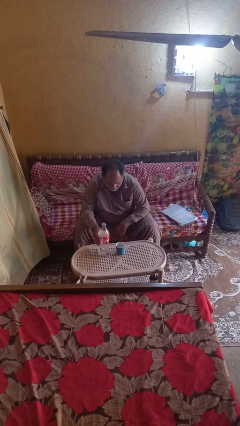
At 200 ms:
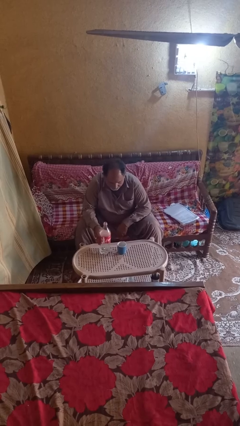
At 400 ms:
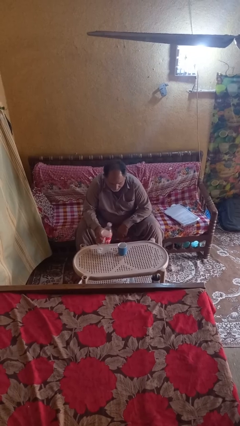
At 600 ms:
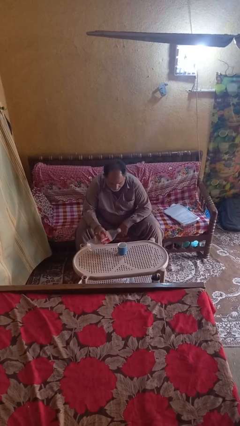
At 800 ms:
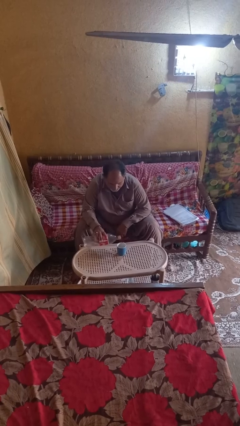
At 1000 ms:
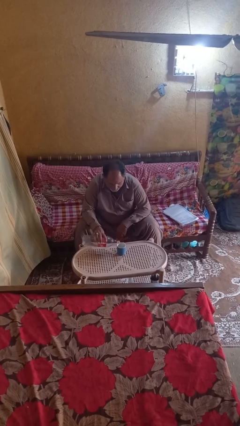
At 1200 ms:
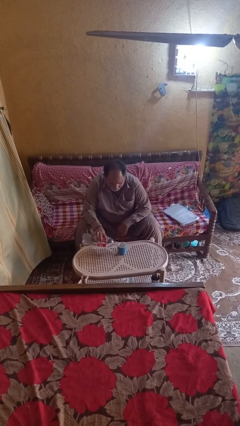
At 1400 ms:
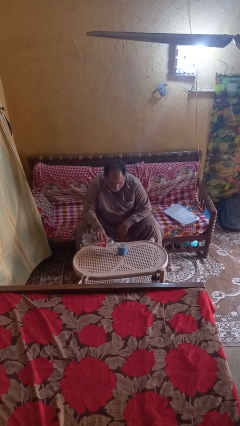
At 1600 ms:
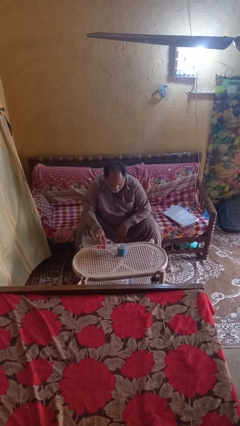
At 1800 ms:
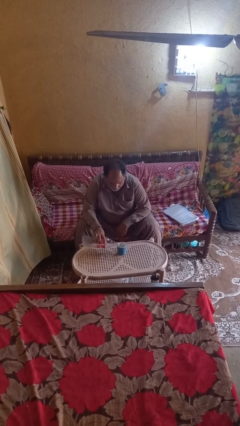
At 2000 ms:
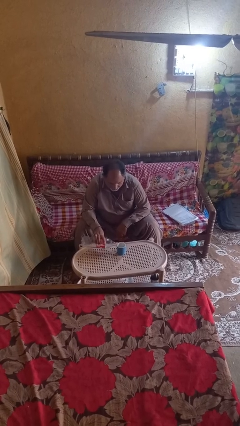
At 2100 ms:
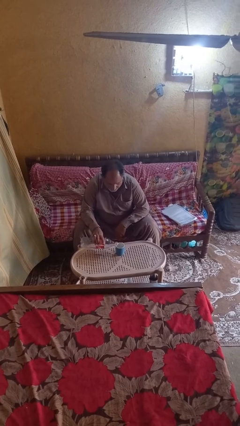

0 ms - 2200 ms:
person pours liquid into cup

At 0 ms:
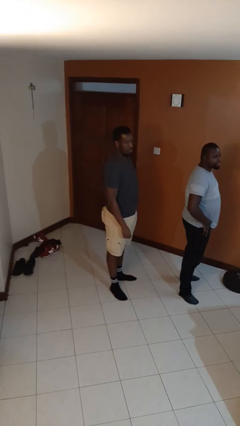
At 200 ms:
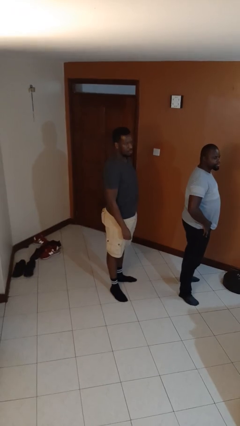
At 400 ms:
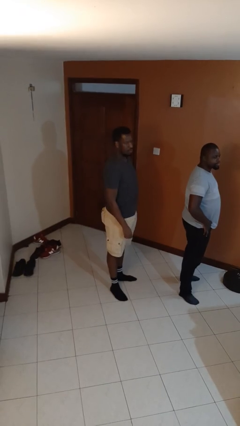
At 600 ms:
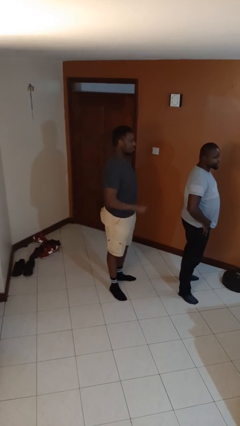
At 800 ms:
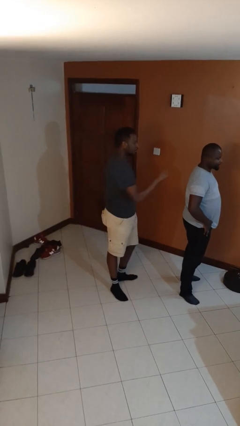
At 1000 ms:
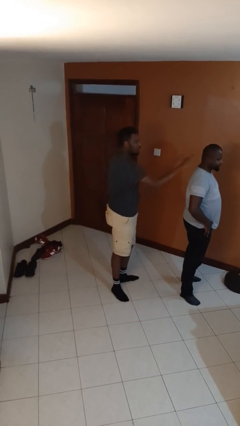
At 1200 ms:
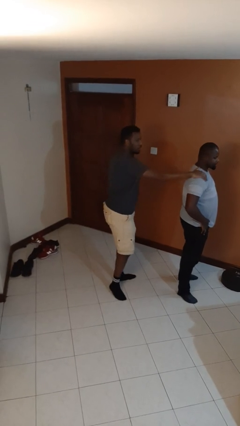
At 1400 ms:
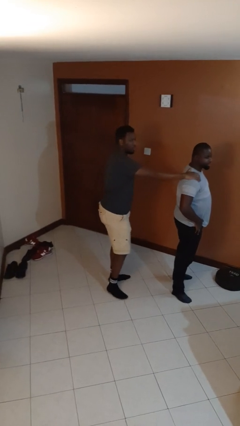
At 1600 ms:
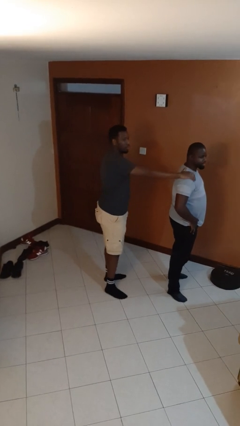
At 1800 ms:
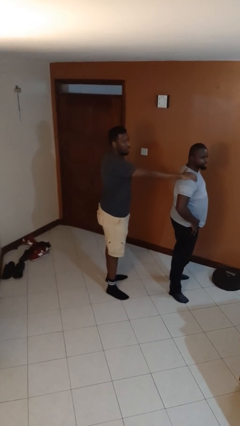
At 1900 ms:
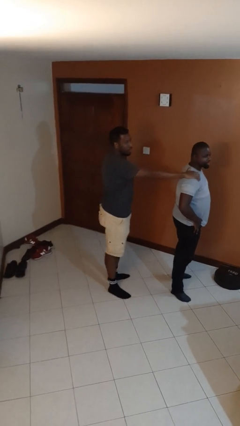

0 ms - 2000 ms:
person grabs person by shoulder

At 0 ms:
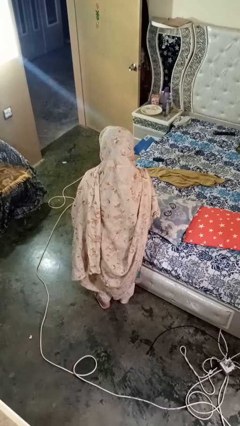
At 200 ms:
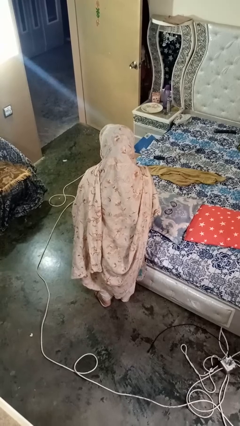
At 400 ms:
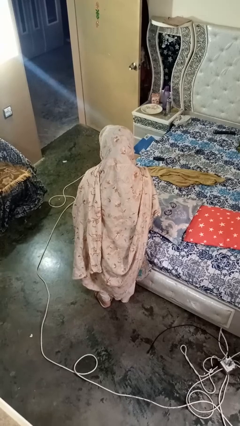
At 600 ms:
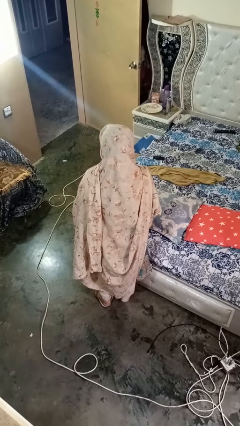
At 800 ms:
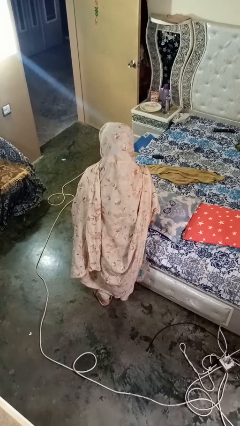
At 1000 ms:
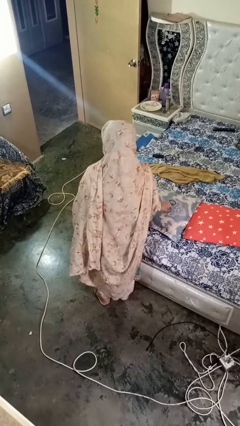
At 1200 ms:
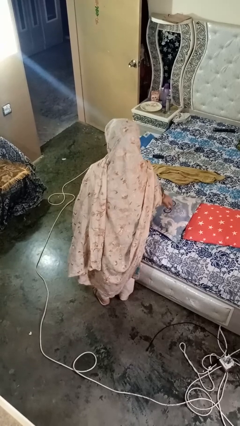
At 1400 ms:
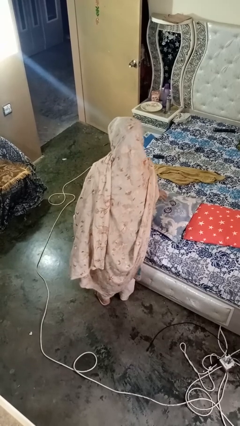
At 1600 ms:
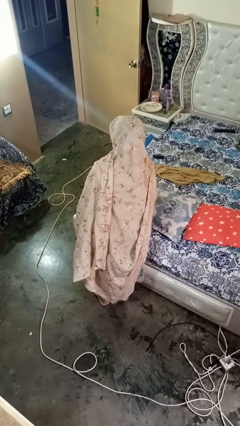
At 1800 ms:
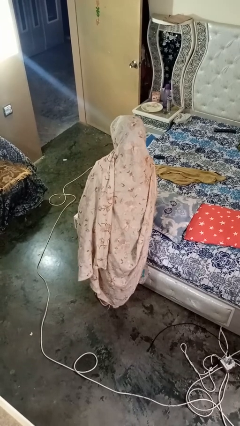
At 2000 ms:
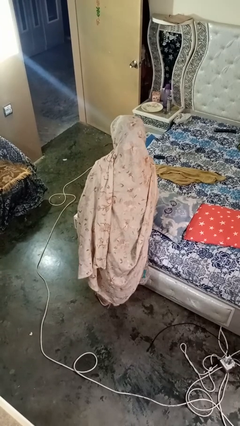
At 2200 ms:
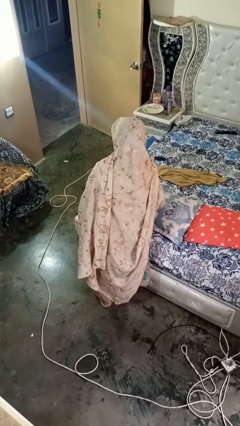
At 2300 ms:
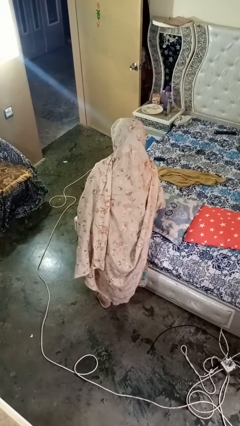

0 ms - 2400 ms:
person taps object with finger

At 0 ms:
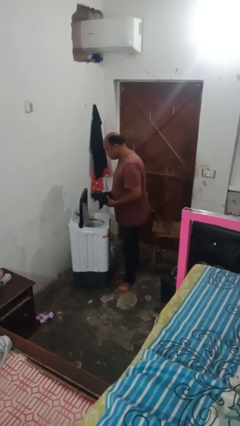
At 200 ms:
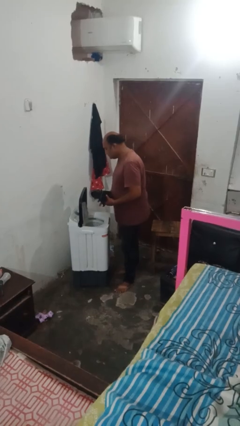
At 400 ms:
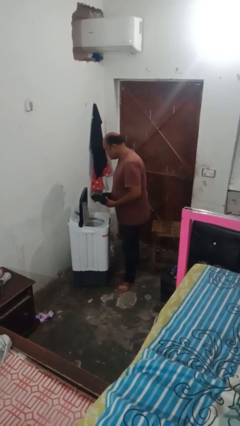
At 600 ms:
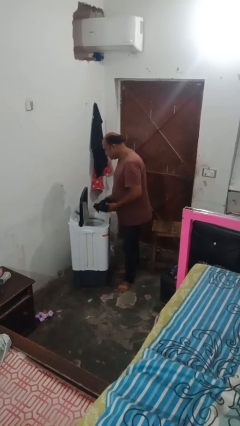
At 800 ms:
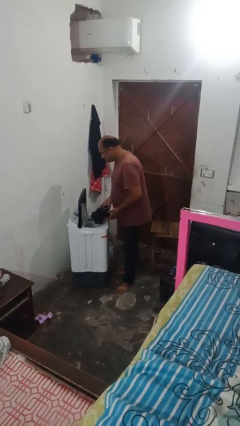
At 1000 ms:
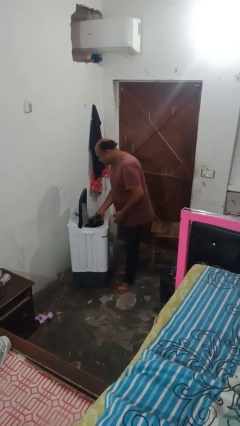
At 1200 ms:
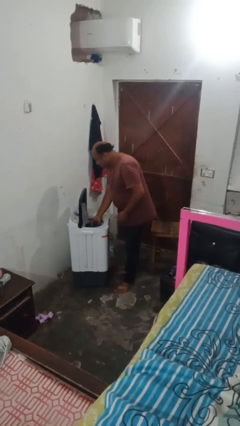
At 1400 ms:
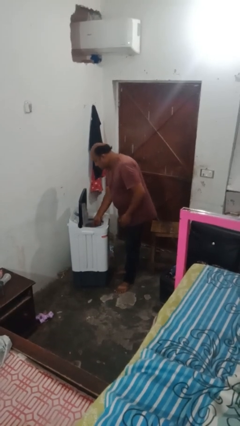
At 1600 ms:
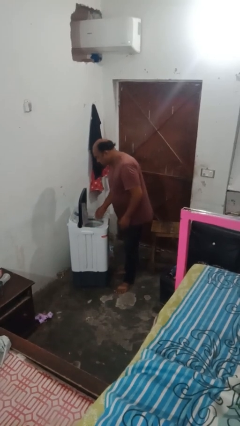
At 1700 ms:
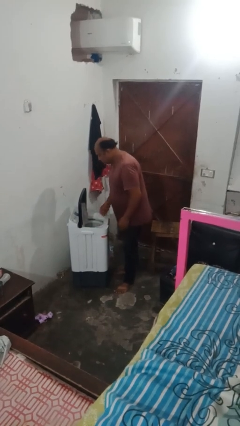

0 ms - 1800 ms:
person loads clotheswasher

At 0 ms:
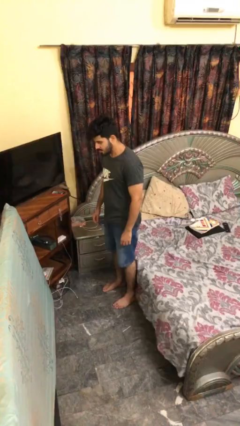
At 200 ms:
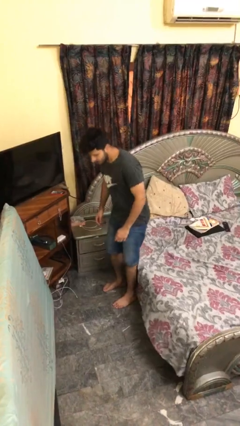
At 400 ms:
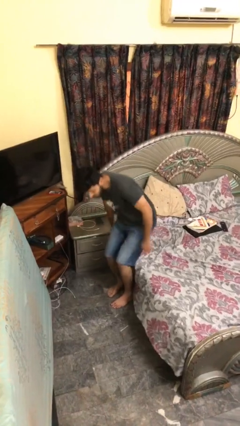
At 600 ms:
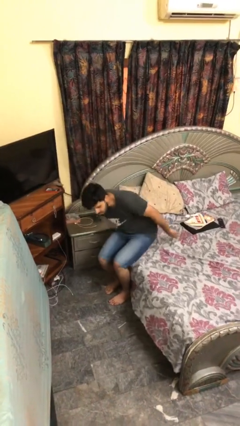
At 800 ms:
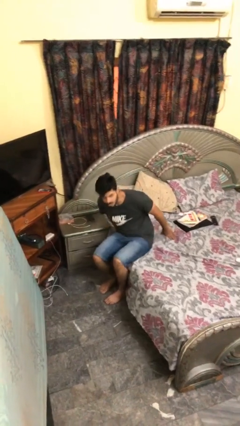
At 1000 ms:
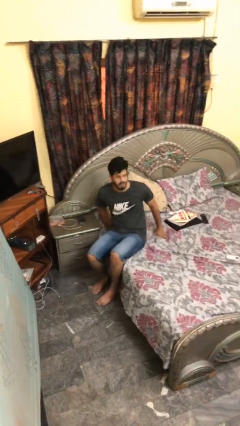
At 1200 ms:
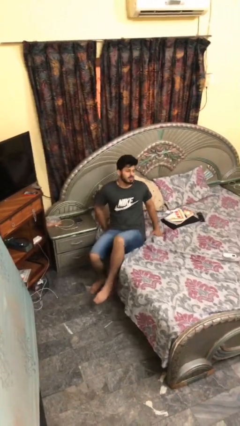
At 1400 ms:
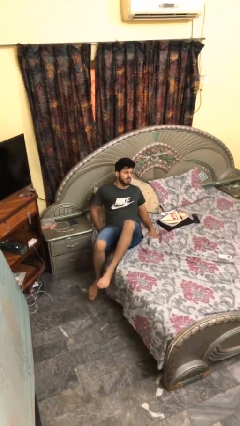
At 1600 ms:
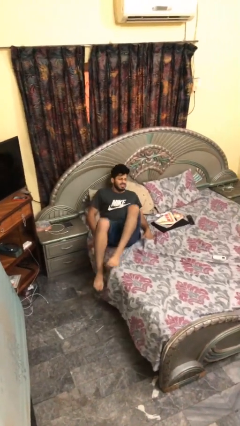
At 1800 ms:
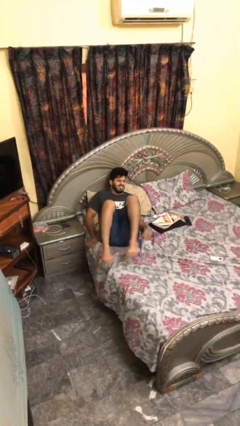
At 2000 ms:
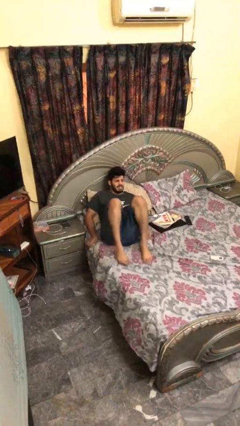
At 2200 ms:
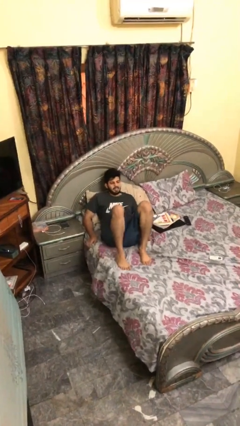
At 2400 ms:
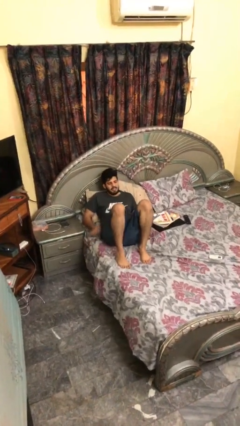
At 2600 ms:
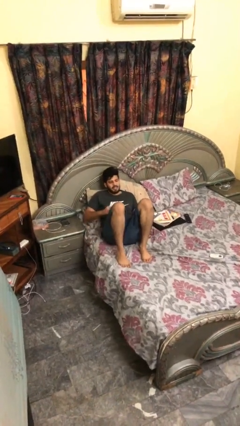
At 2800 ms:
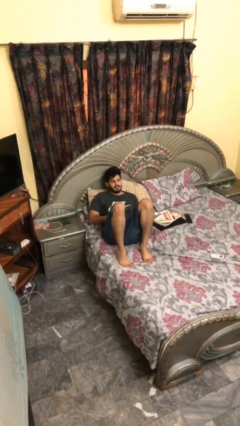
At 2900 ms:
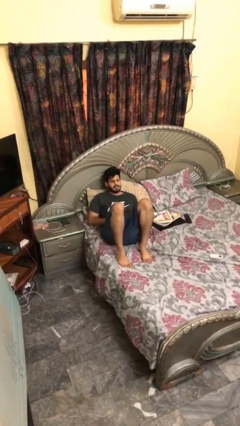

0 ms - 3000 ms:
person lies down on bed

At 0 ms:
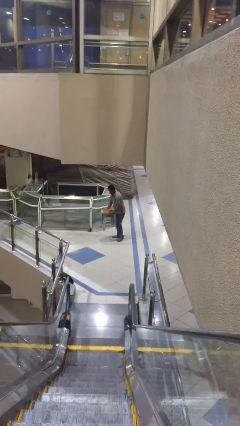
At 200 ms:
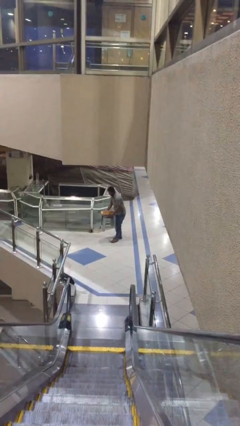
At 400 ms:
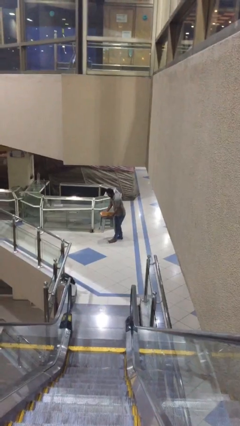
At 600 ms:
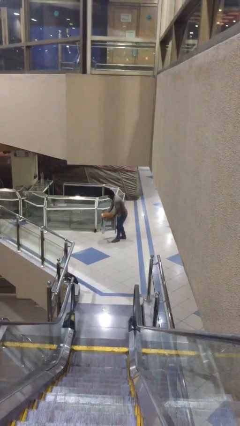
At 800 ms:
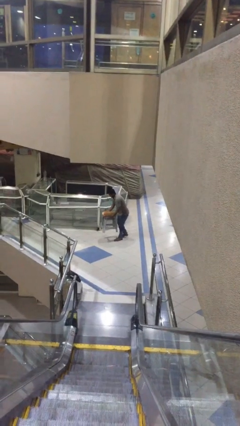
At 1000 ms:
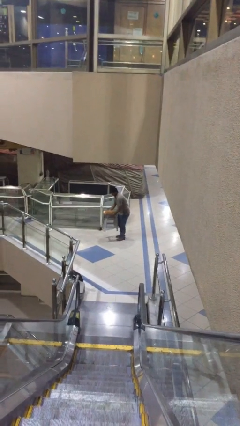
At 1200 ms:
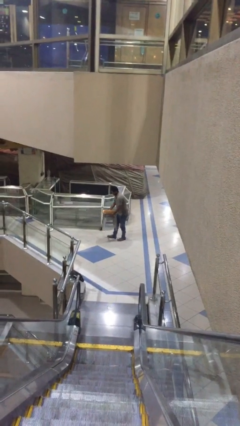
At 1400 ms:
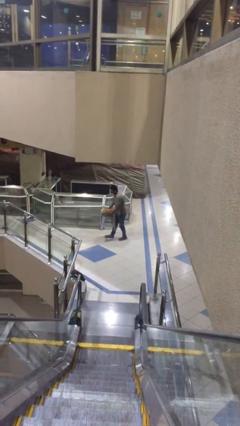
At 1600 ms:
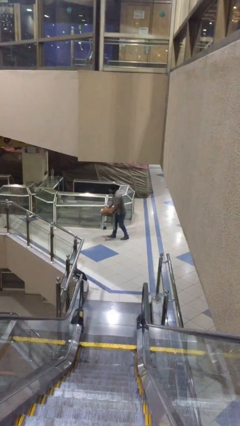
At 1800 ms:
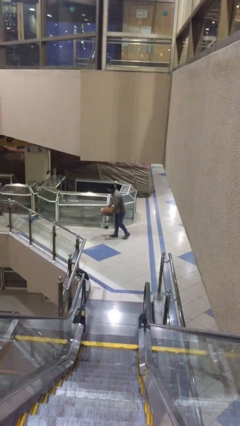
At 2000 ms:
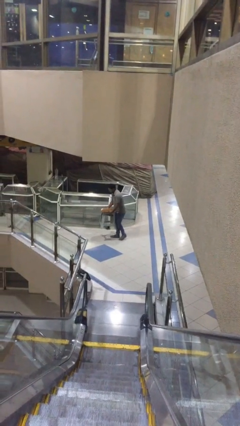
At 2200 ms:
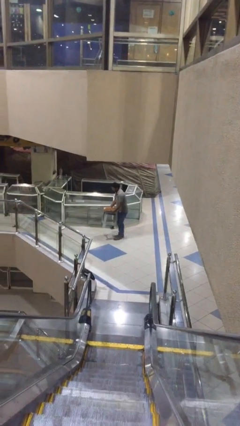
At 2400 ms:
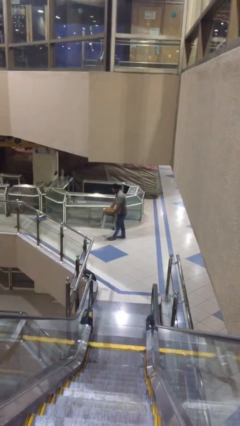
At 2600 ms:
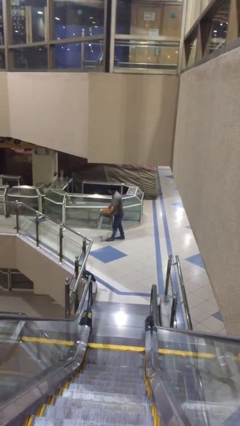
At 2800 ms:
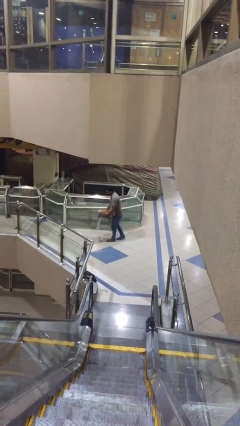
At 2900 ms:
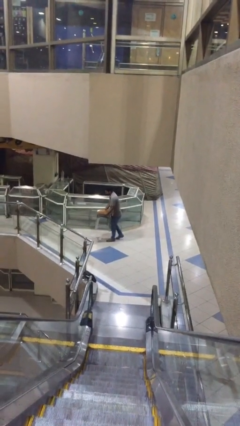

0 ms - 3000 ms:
person carries heavy object

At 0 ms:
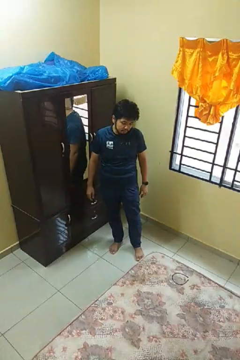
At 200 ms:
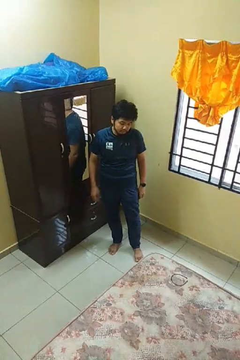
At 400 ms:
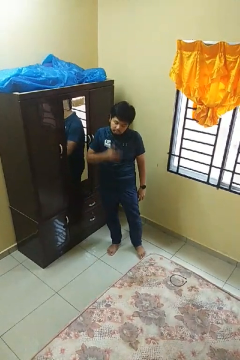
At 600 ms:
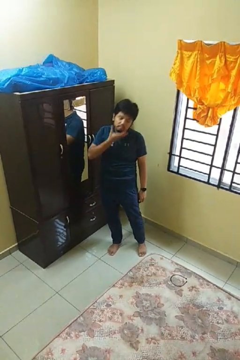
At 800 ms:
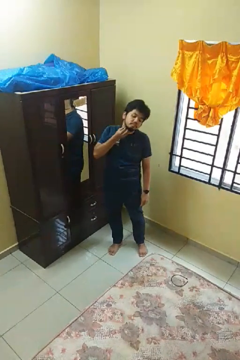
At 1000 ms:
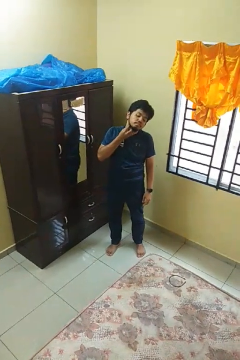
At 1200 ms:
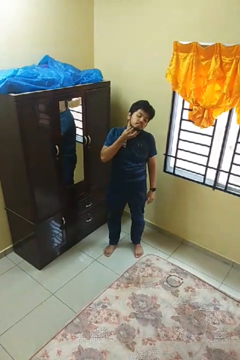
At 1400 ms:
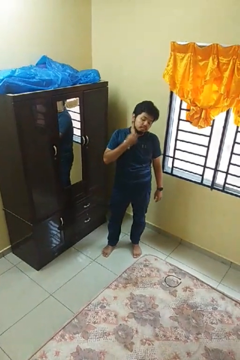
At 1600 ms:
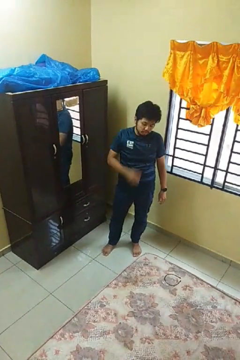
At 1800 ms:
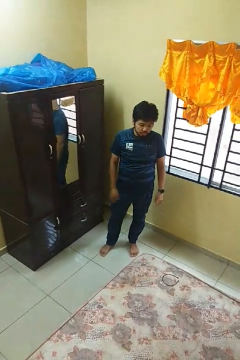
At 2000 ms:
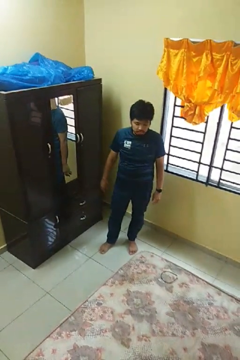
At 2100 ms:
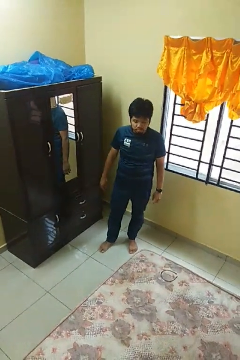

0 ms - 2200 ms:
person scratches face

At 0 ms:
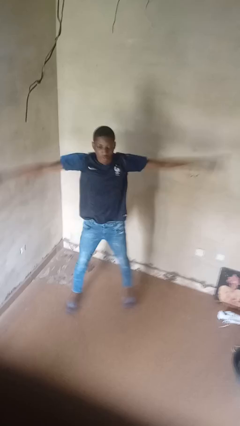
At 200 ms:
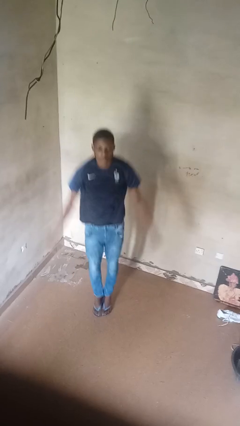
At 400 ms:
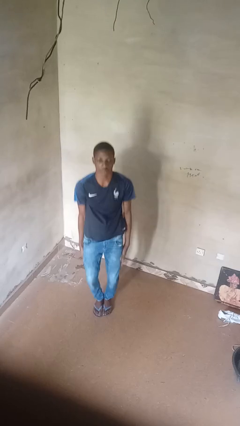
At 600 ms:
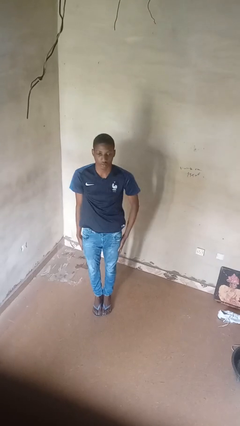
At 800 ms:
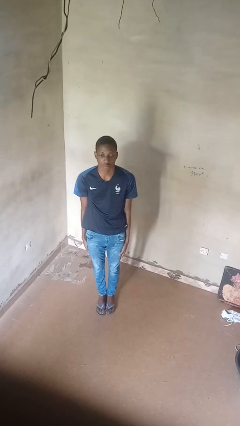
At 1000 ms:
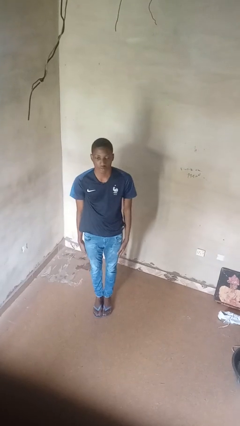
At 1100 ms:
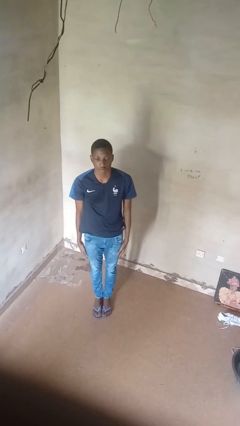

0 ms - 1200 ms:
person exercises with jumping jacks
